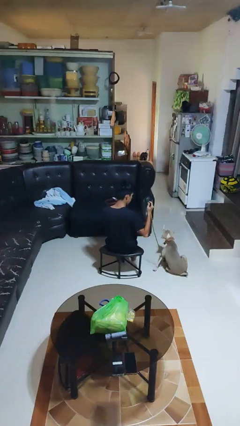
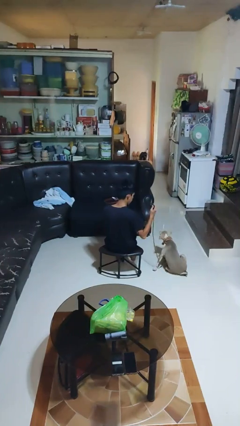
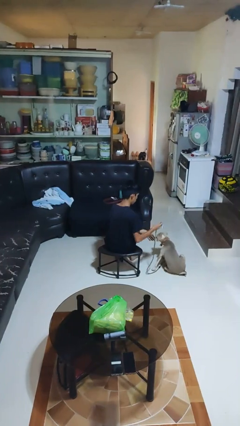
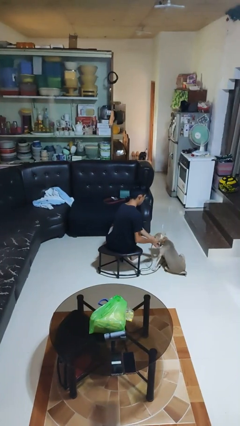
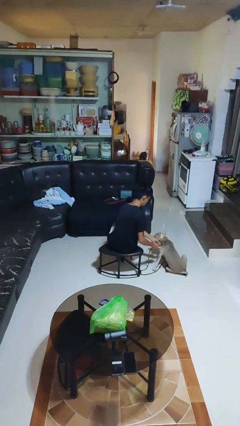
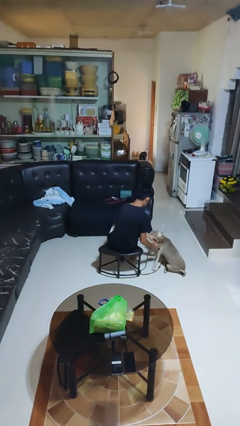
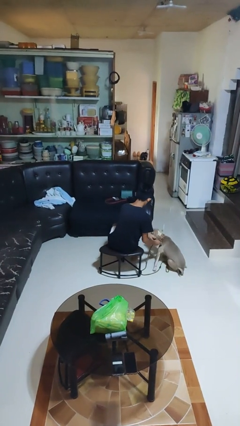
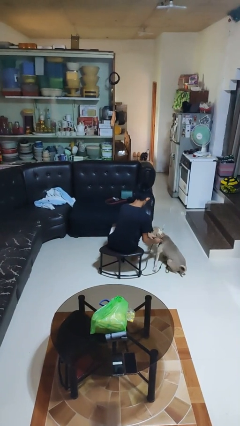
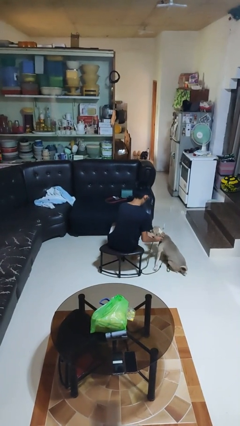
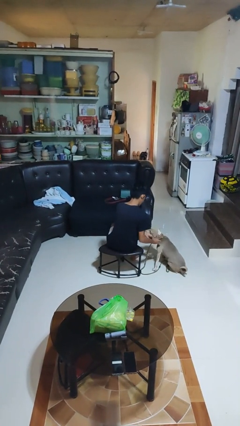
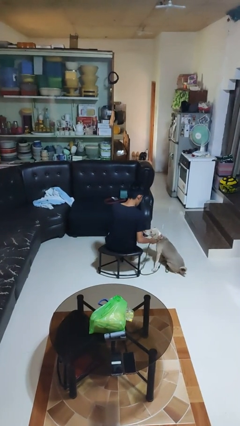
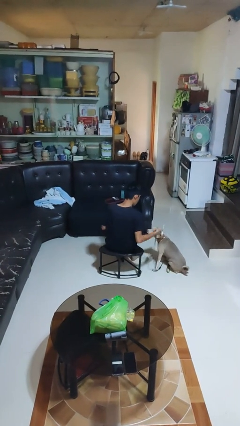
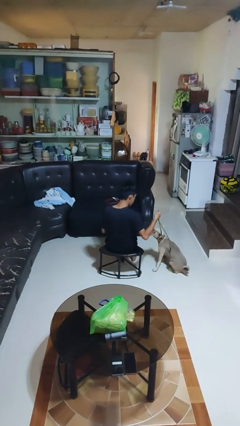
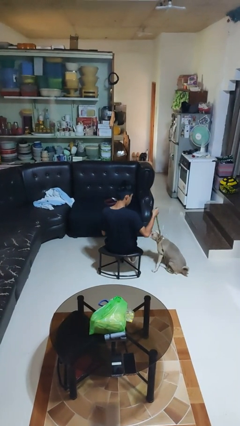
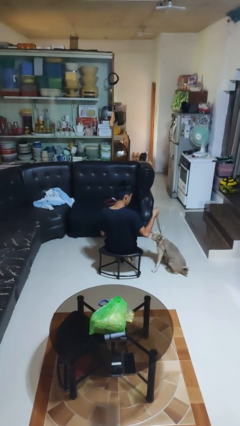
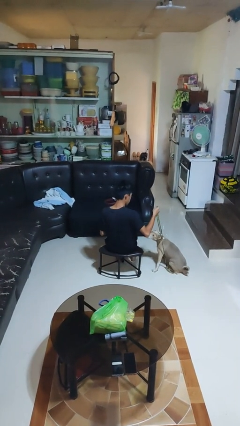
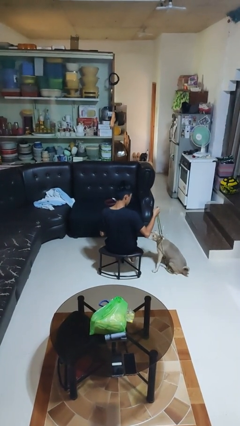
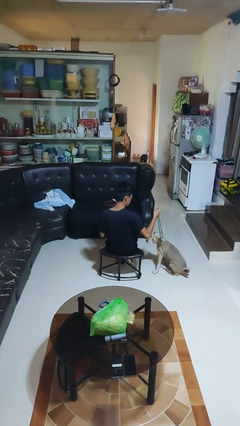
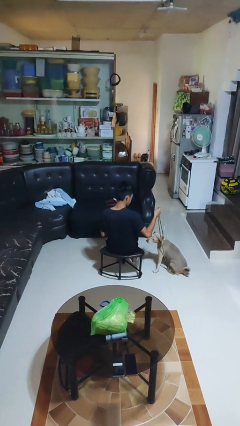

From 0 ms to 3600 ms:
person attaches leash to dog

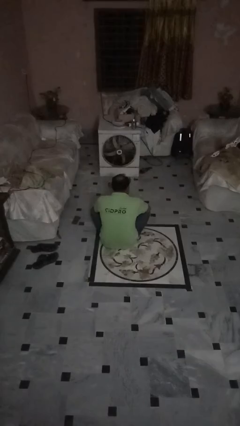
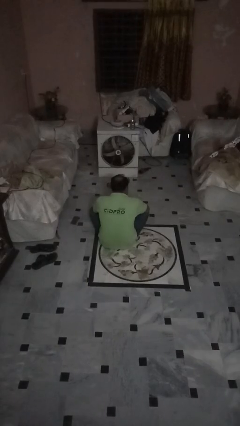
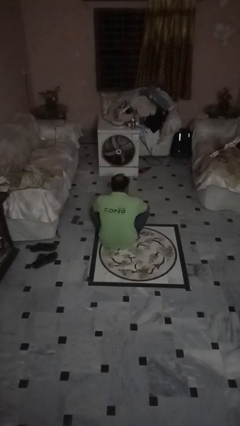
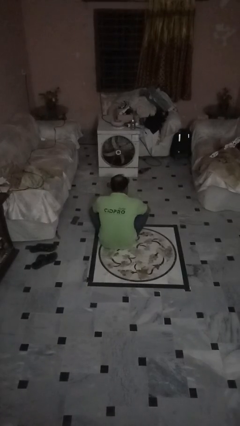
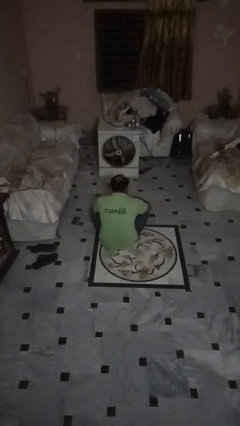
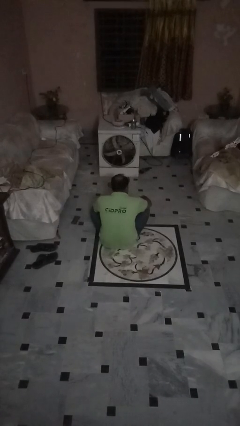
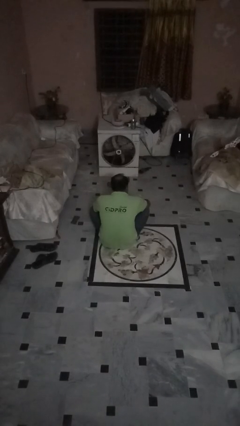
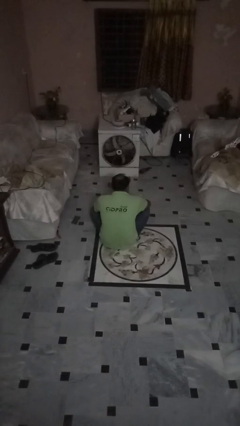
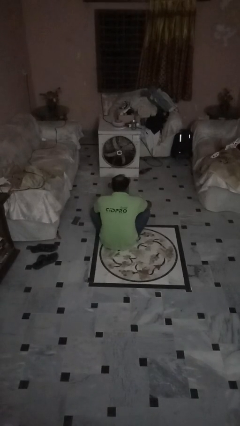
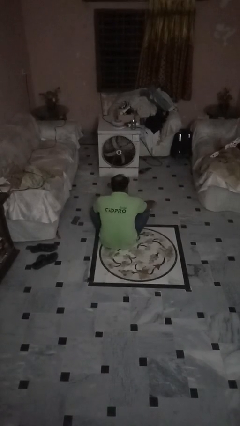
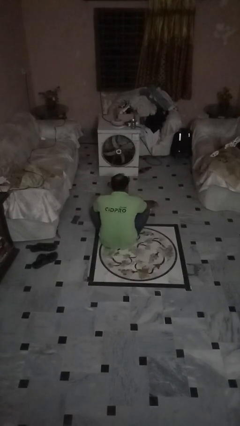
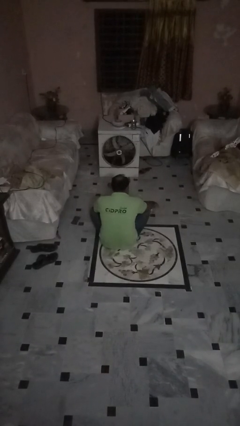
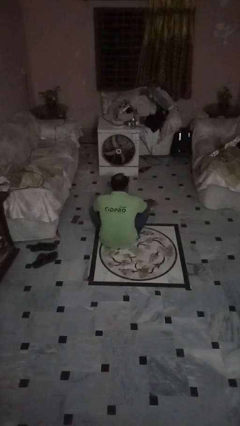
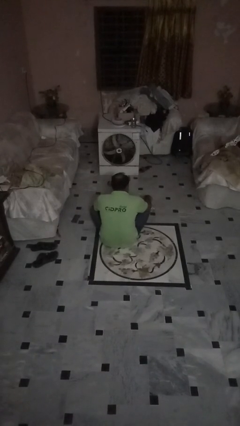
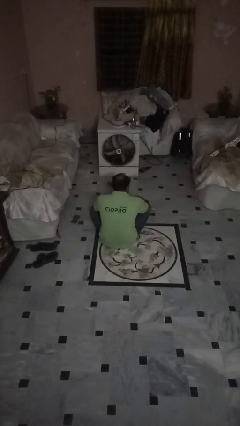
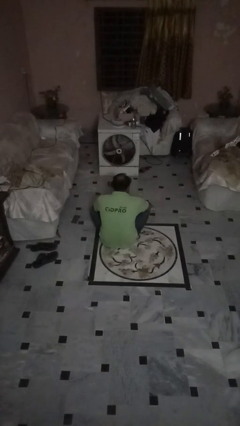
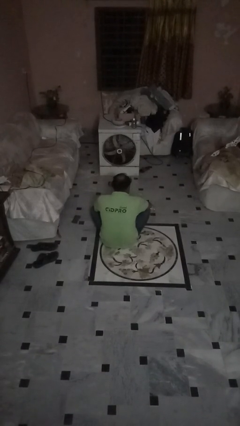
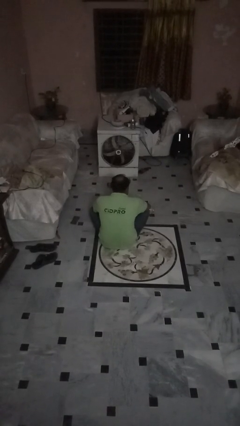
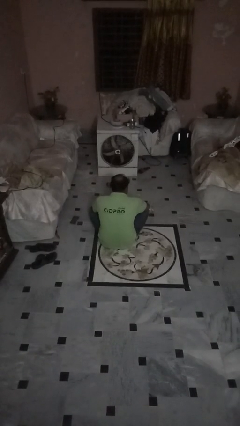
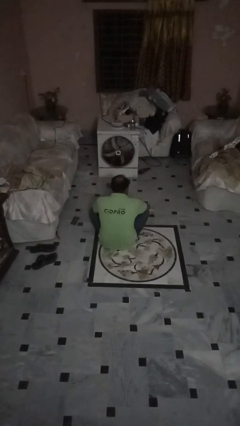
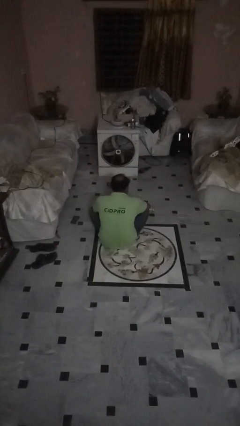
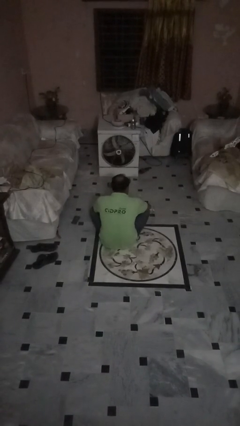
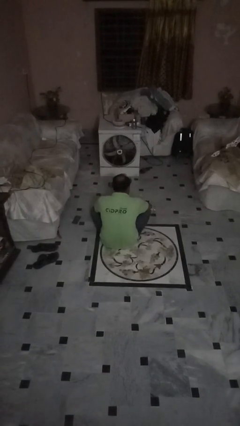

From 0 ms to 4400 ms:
person sets upright glass

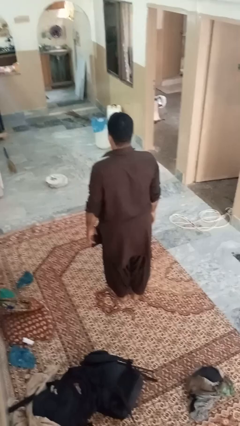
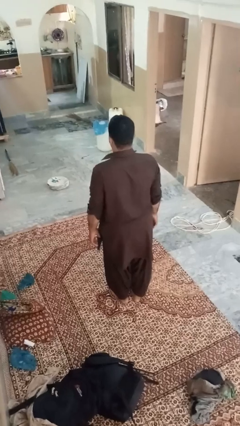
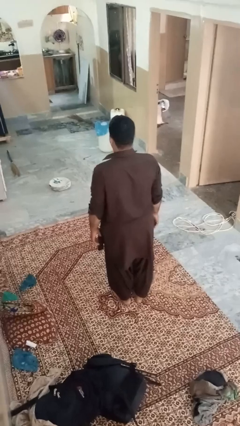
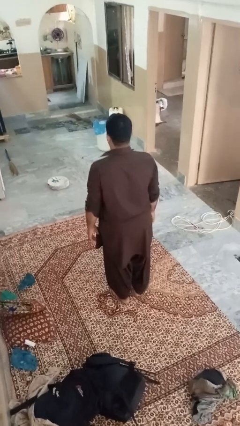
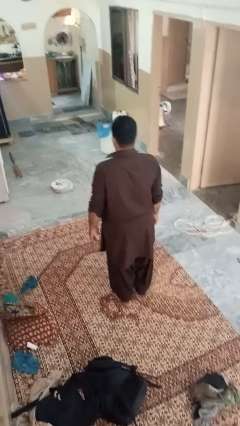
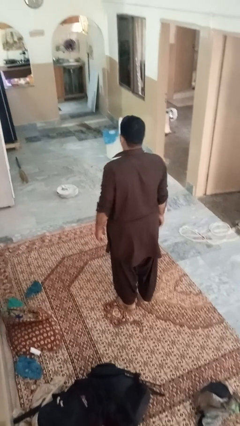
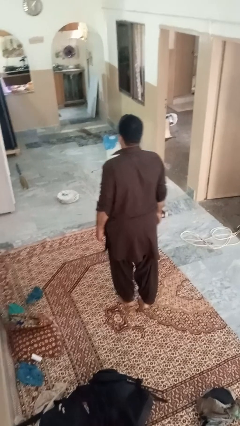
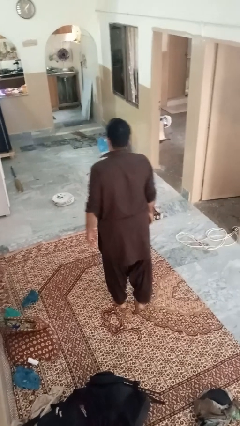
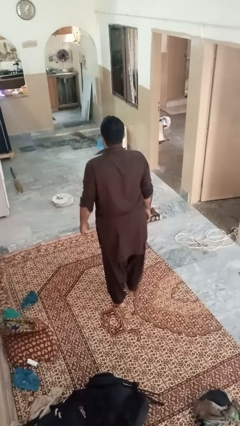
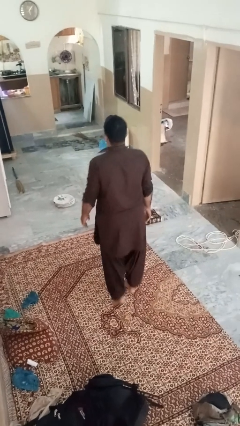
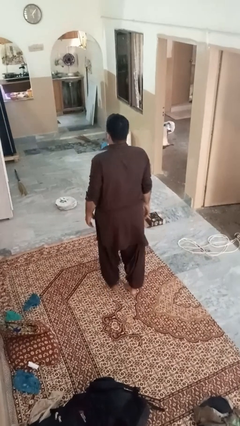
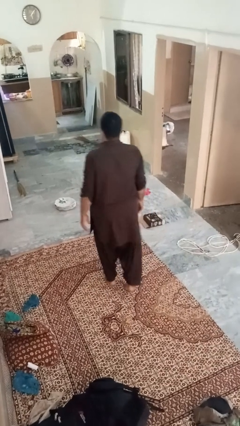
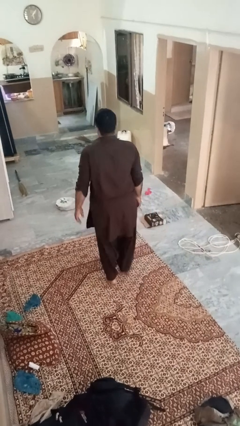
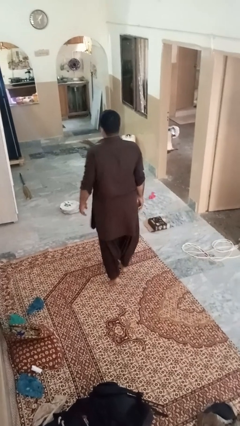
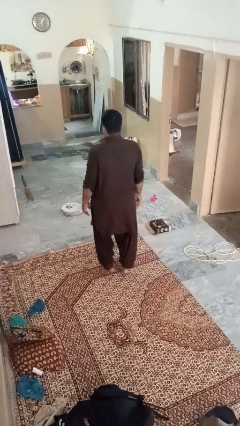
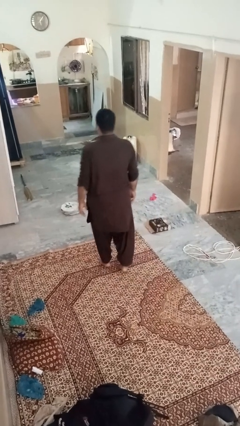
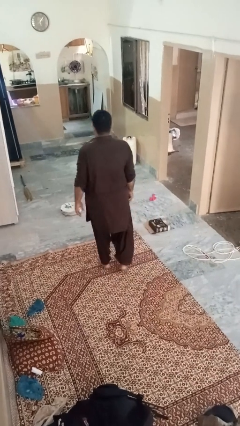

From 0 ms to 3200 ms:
person walks tiptoe

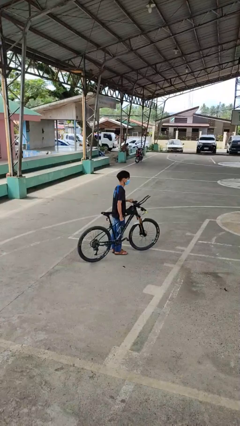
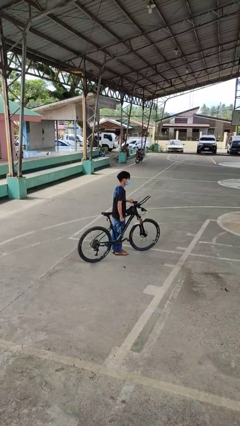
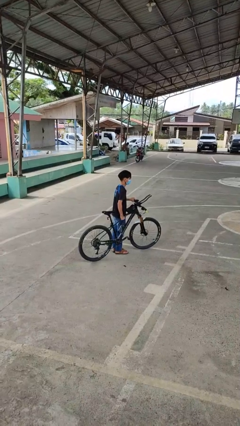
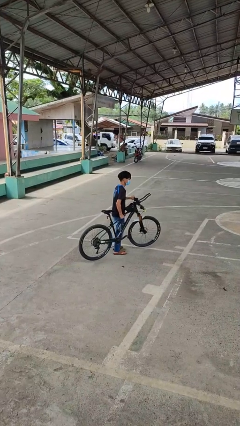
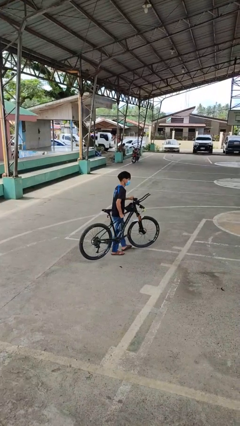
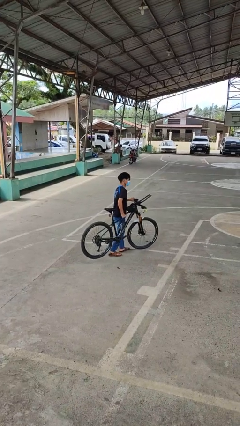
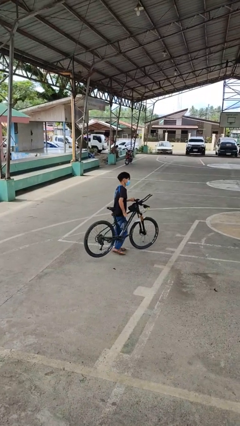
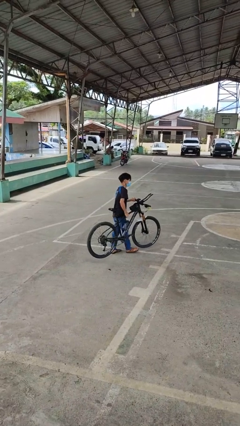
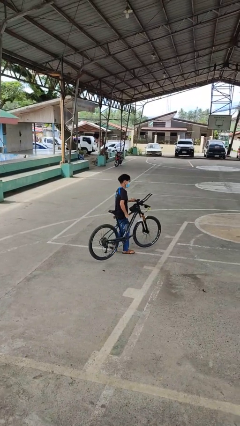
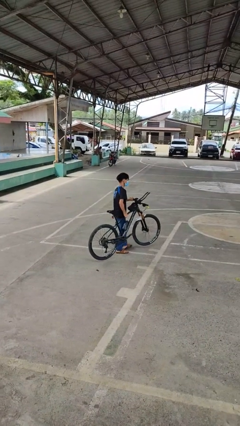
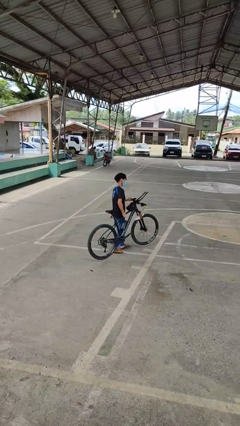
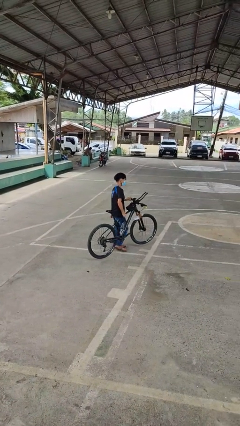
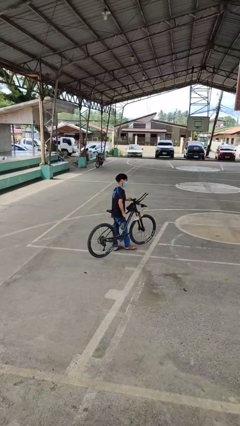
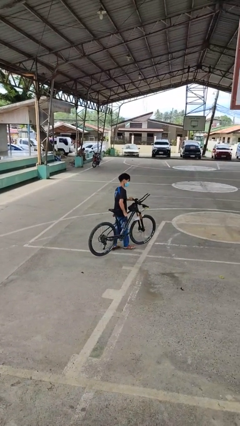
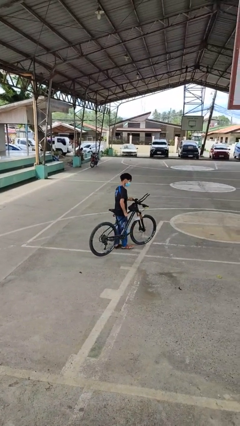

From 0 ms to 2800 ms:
person carries bicycle

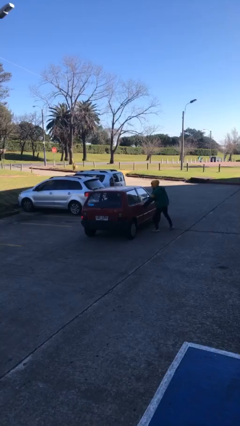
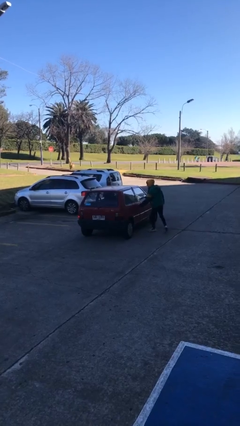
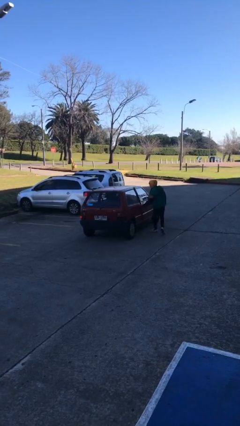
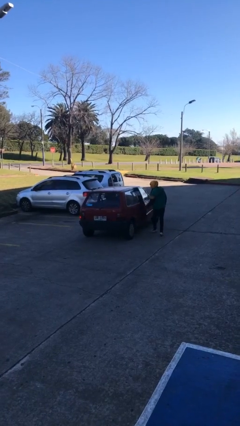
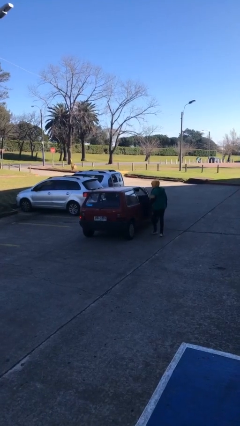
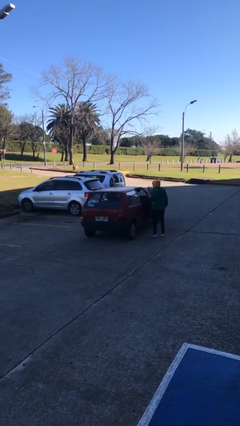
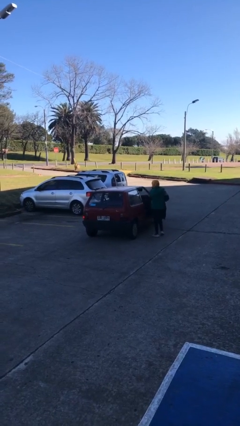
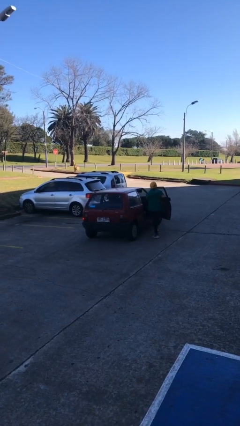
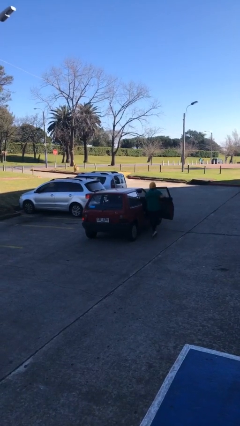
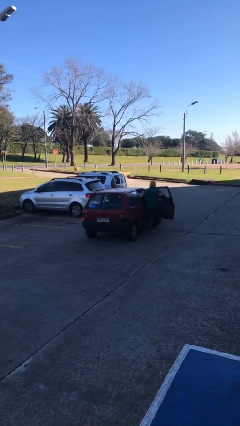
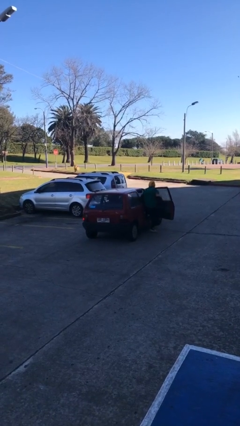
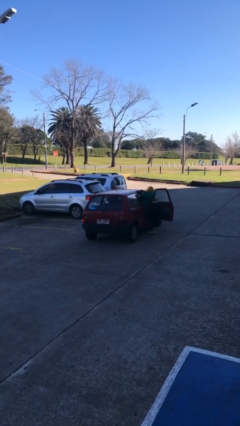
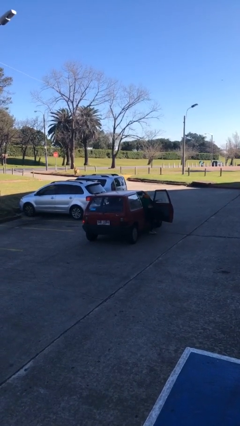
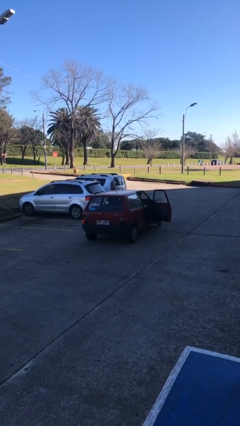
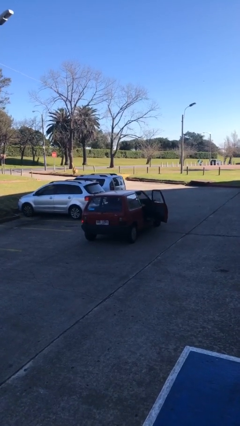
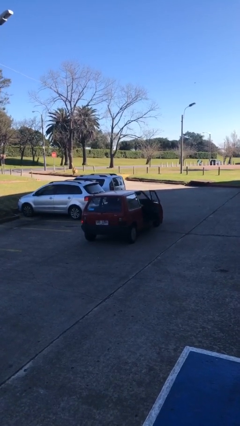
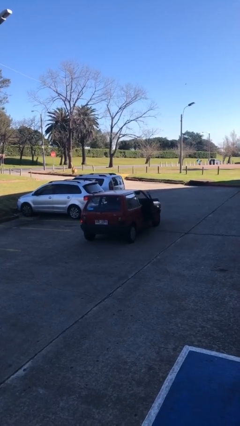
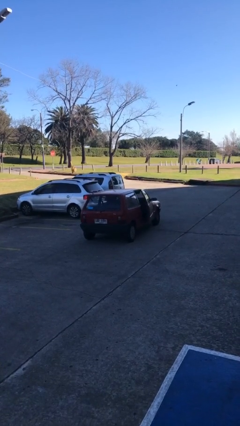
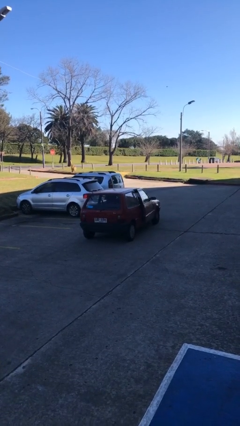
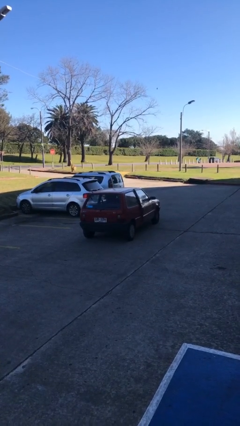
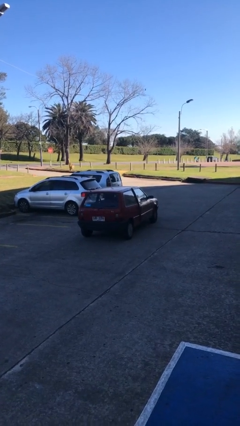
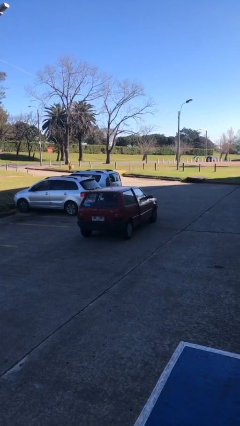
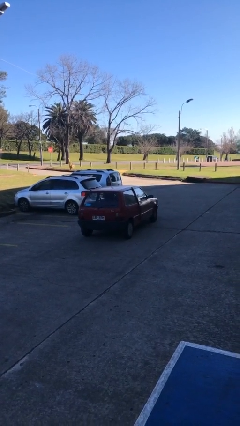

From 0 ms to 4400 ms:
car picks up person
